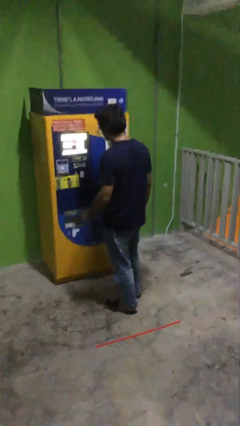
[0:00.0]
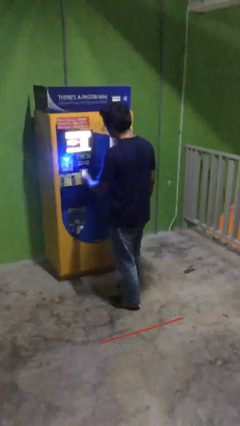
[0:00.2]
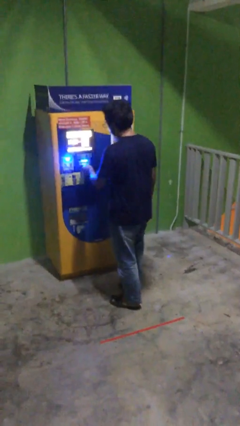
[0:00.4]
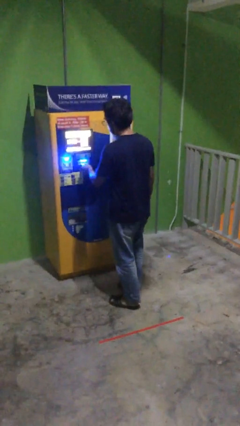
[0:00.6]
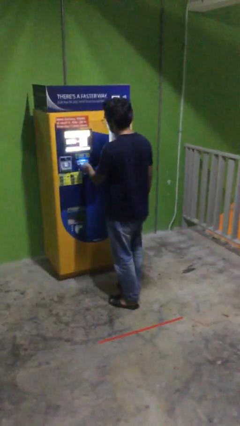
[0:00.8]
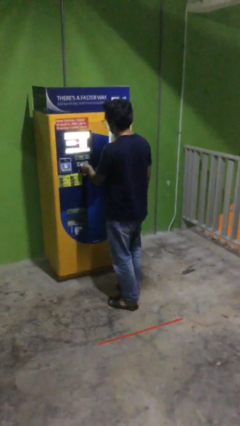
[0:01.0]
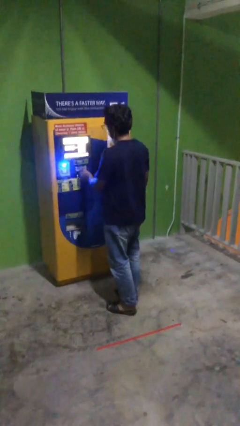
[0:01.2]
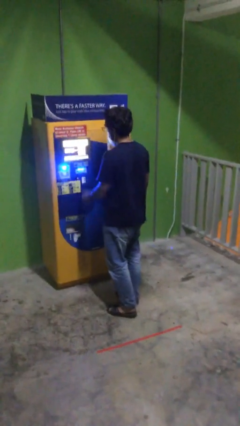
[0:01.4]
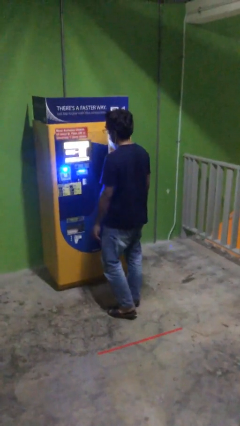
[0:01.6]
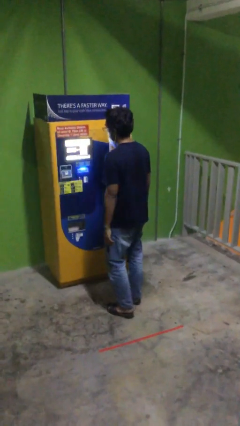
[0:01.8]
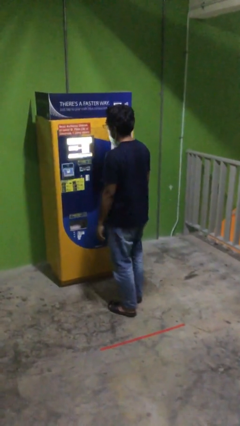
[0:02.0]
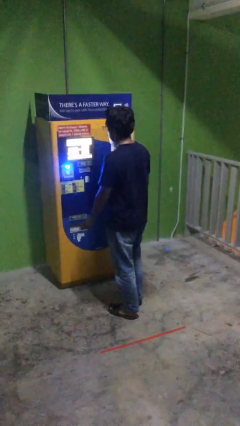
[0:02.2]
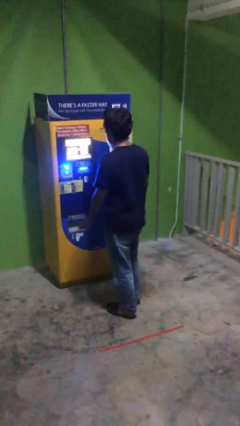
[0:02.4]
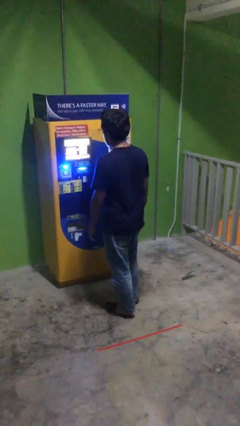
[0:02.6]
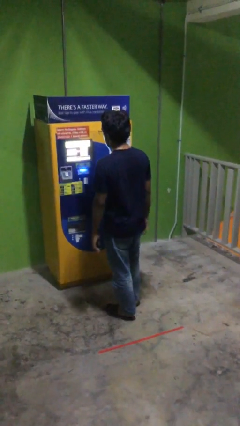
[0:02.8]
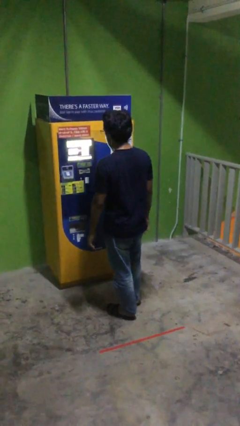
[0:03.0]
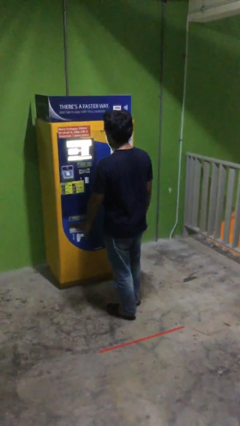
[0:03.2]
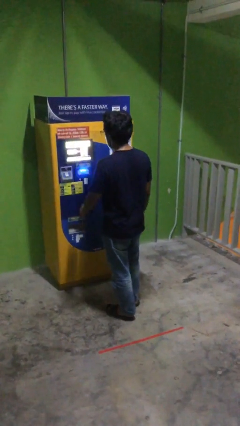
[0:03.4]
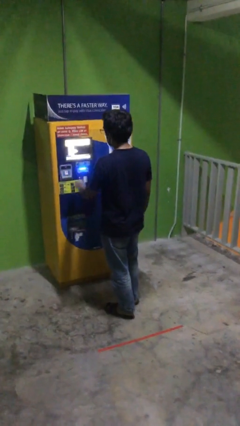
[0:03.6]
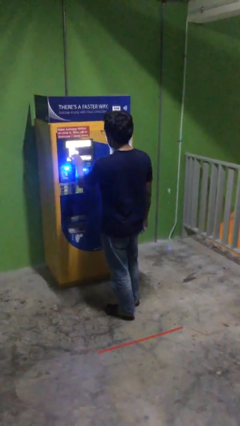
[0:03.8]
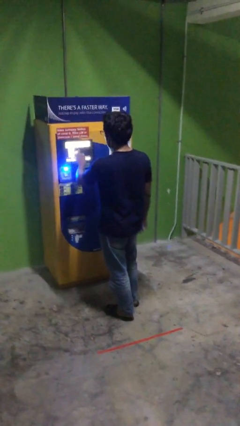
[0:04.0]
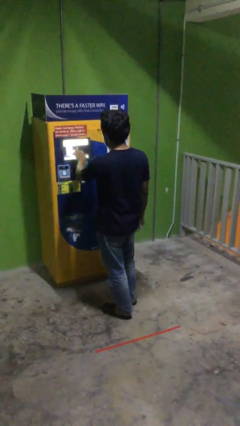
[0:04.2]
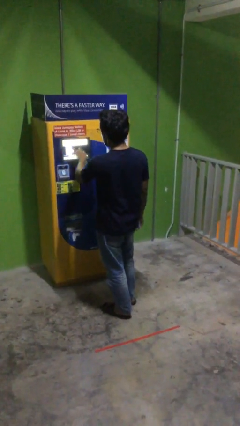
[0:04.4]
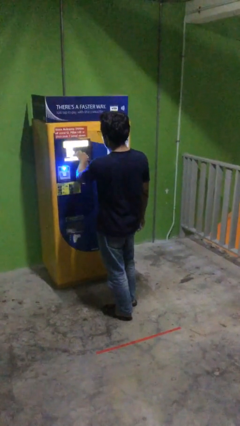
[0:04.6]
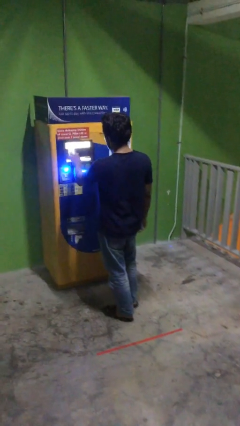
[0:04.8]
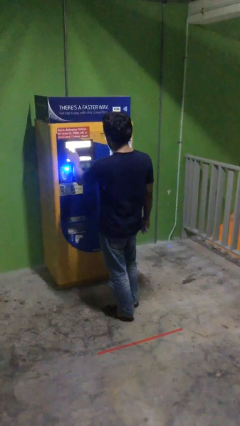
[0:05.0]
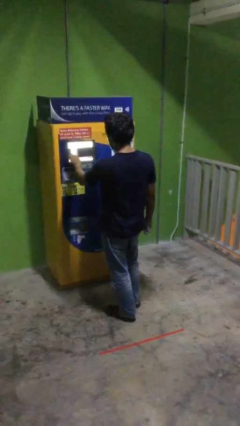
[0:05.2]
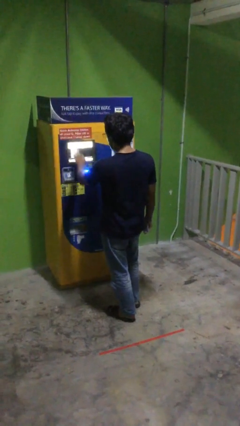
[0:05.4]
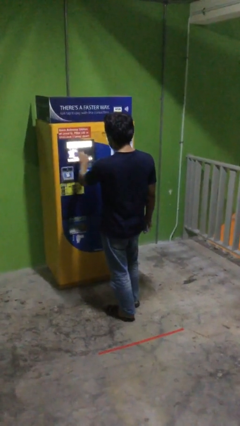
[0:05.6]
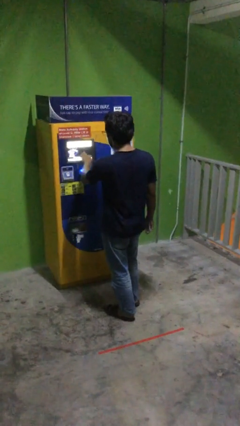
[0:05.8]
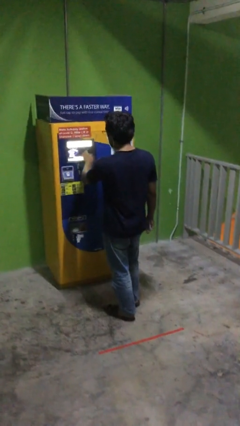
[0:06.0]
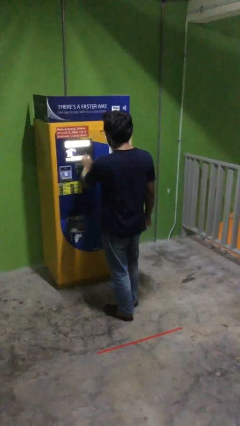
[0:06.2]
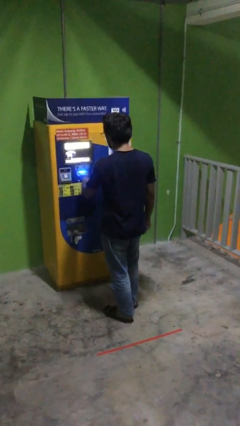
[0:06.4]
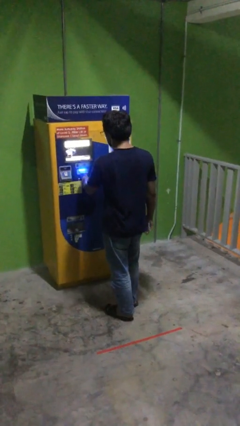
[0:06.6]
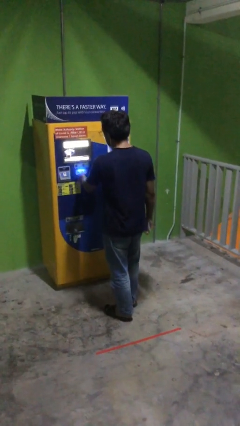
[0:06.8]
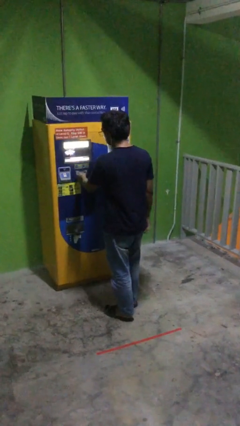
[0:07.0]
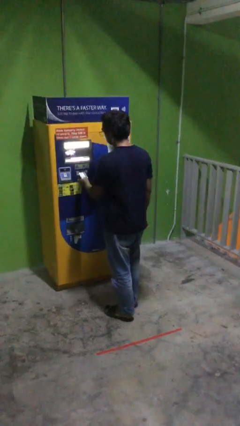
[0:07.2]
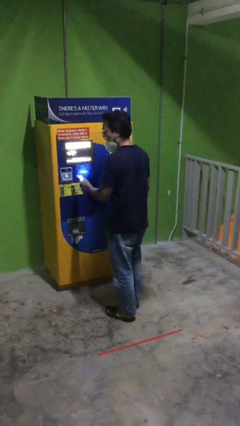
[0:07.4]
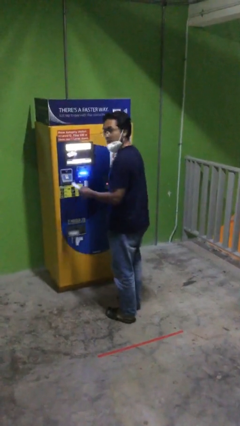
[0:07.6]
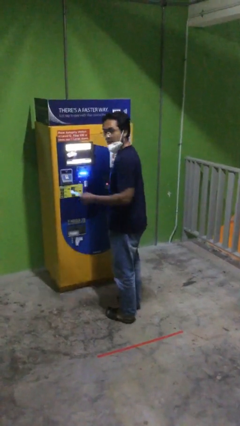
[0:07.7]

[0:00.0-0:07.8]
person purchases from machine

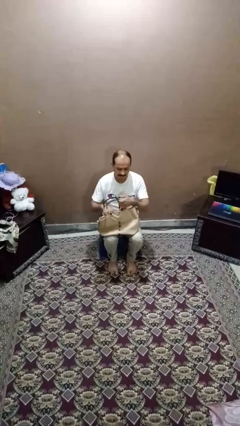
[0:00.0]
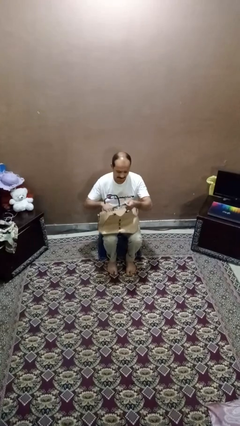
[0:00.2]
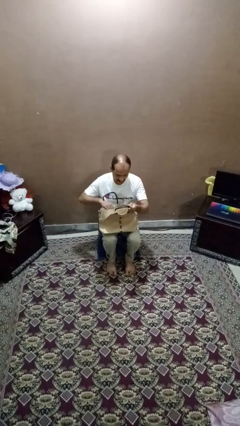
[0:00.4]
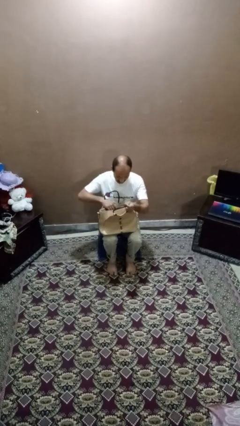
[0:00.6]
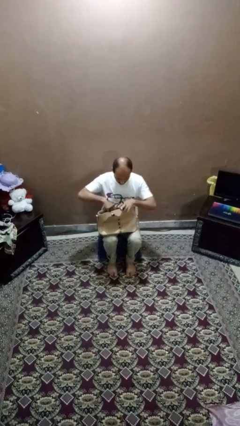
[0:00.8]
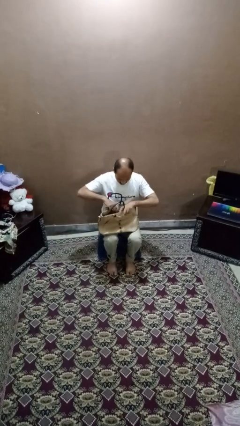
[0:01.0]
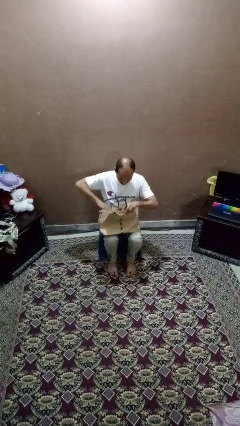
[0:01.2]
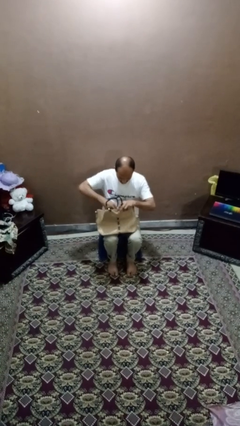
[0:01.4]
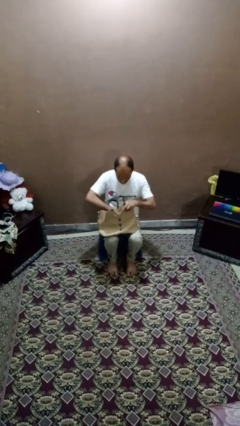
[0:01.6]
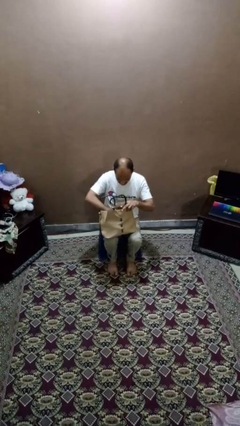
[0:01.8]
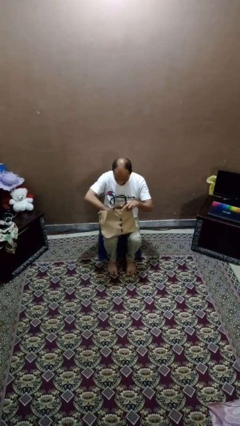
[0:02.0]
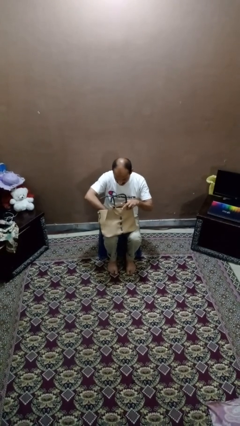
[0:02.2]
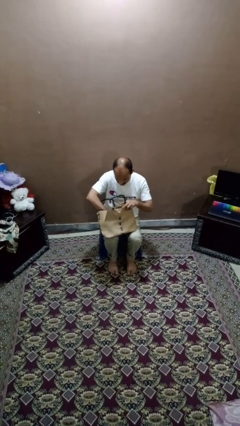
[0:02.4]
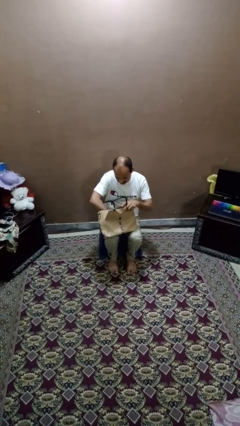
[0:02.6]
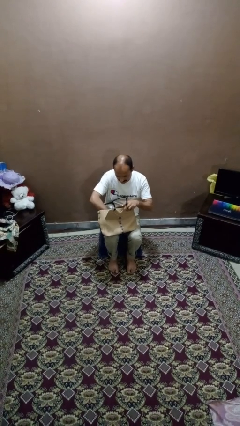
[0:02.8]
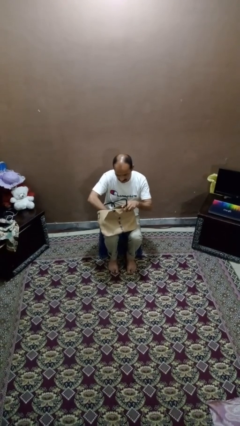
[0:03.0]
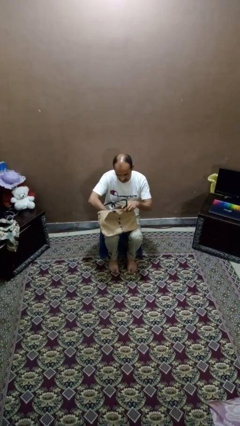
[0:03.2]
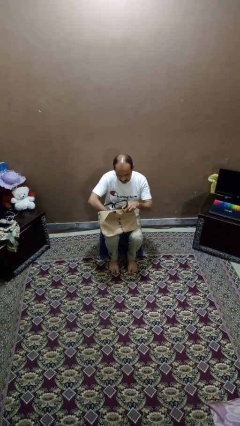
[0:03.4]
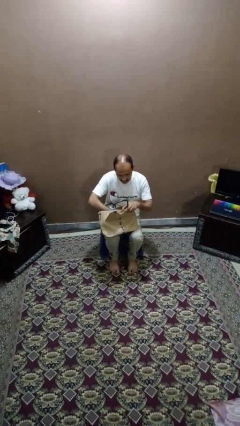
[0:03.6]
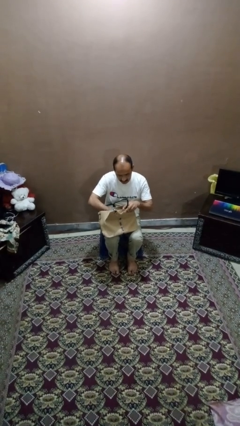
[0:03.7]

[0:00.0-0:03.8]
person searches in purse

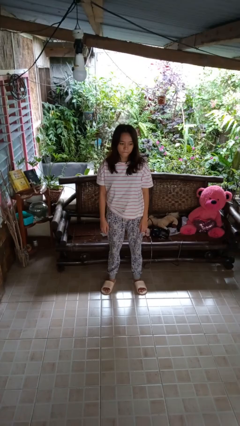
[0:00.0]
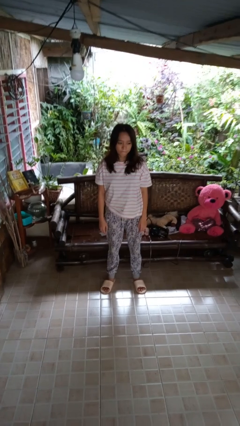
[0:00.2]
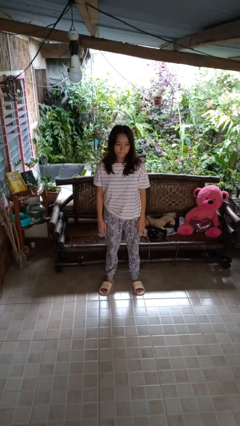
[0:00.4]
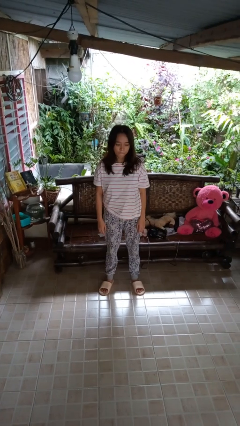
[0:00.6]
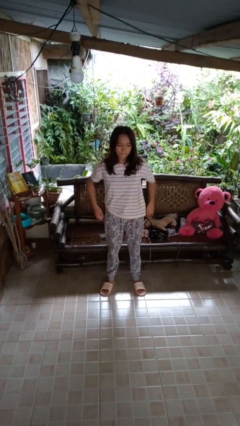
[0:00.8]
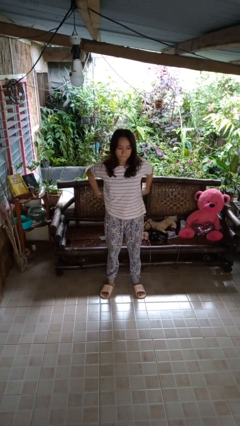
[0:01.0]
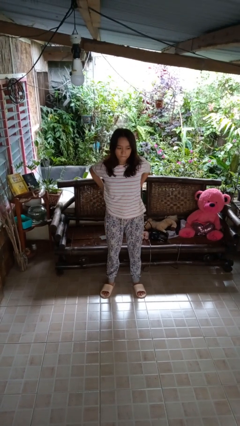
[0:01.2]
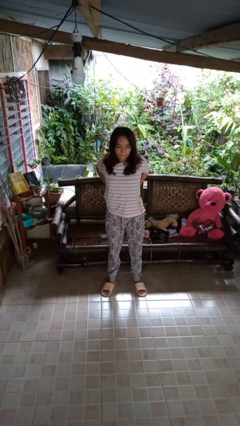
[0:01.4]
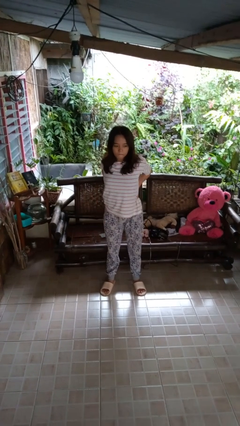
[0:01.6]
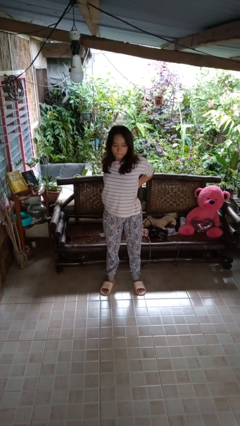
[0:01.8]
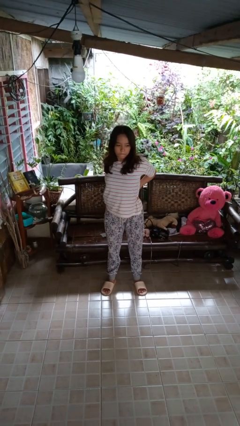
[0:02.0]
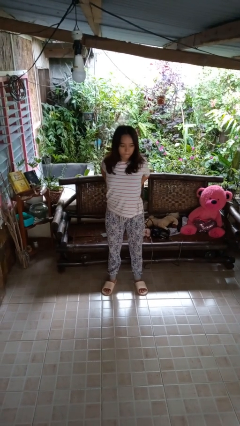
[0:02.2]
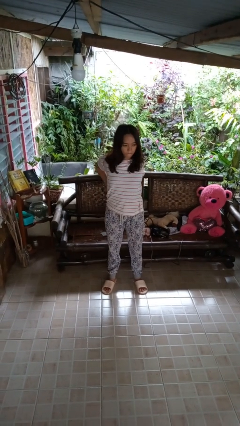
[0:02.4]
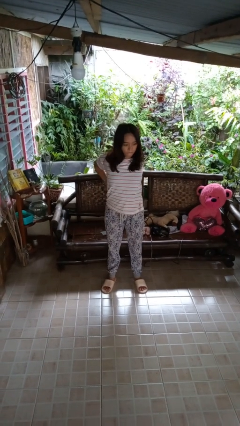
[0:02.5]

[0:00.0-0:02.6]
person stretches back

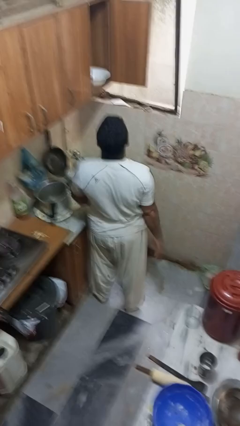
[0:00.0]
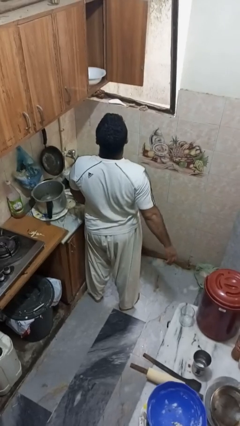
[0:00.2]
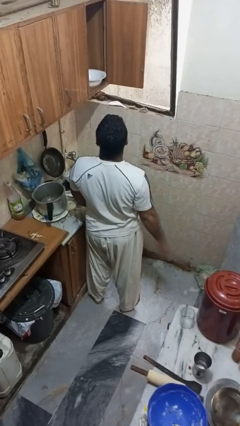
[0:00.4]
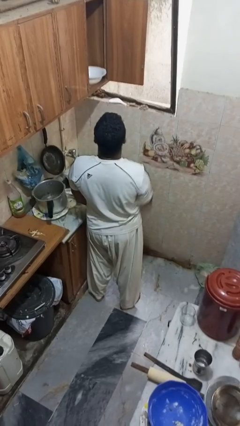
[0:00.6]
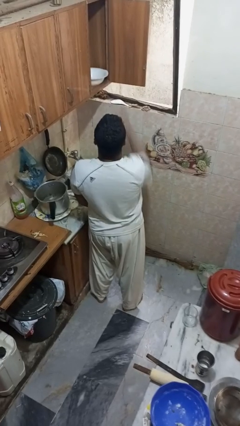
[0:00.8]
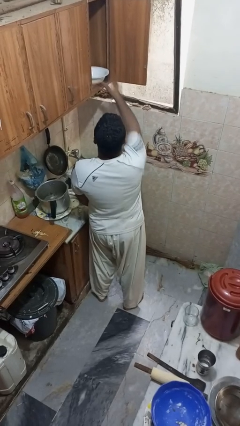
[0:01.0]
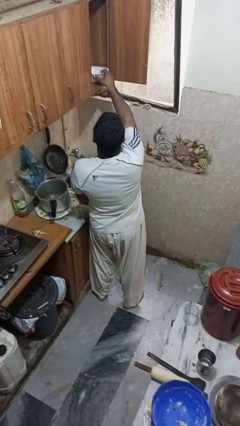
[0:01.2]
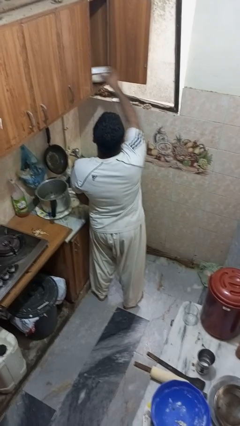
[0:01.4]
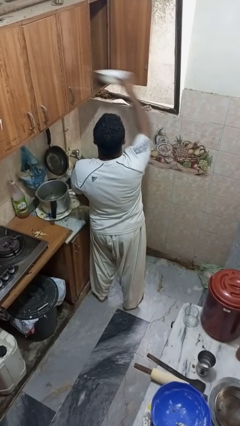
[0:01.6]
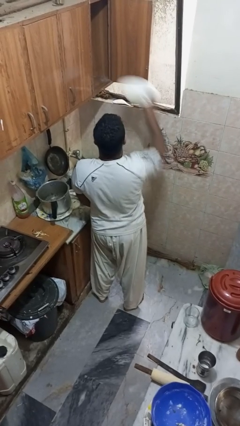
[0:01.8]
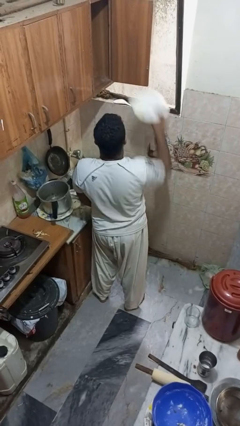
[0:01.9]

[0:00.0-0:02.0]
person takes object from cabinet

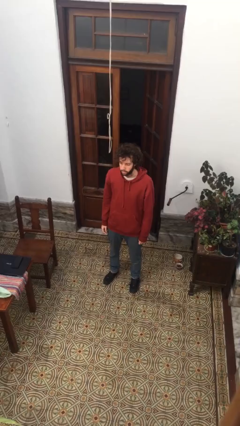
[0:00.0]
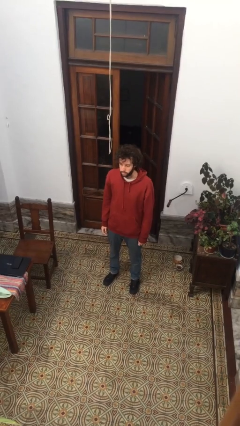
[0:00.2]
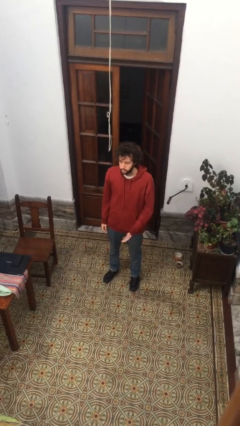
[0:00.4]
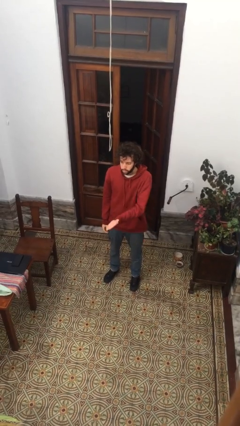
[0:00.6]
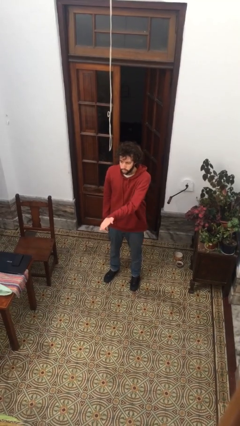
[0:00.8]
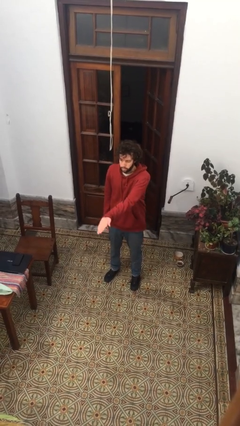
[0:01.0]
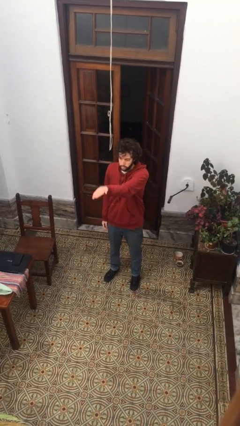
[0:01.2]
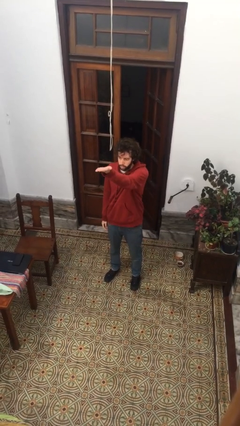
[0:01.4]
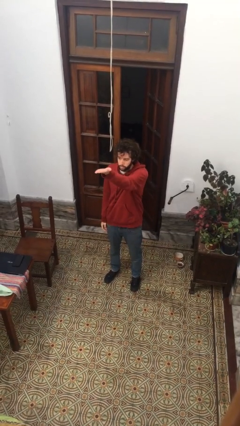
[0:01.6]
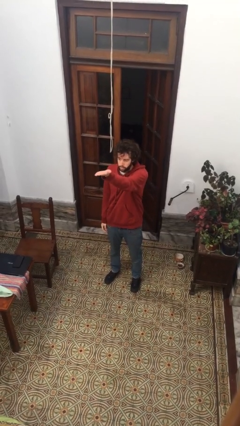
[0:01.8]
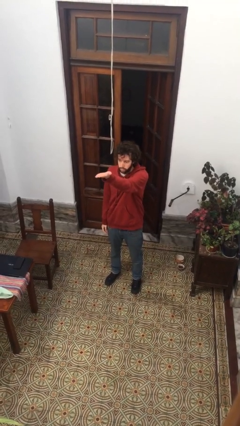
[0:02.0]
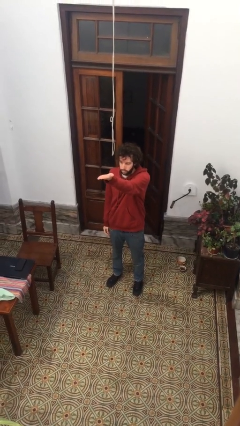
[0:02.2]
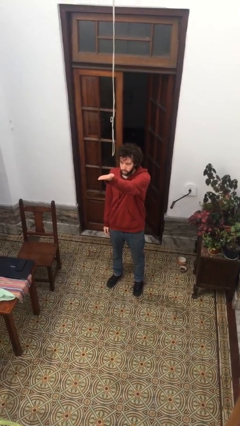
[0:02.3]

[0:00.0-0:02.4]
person gestures swipe up
